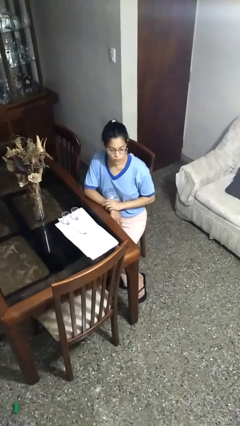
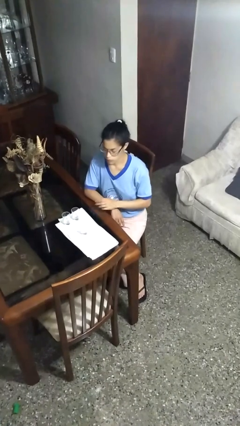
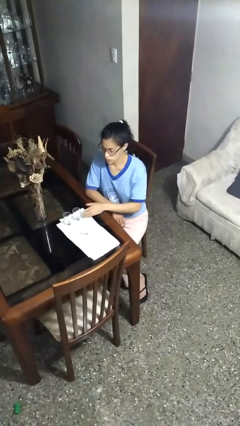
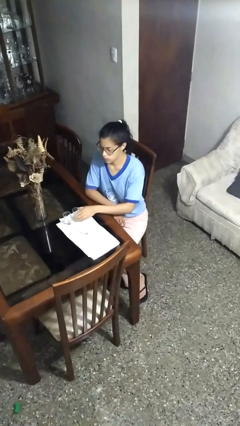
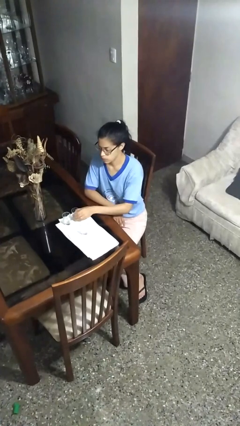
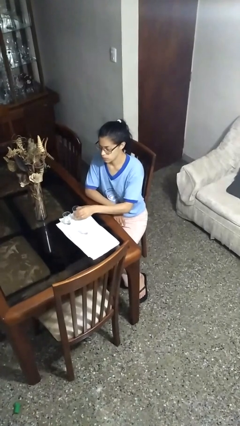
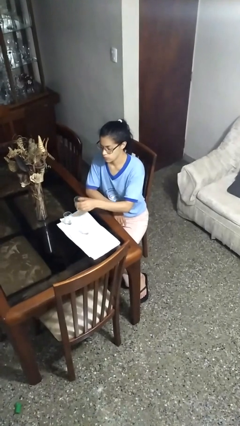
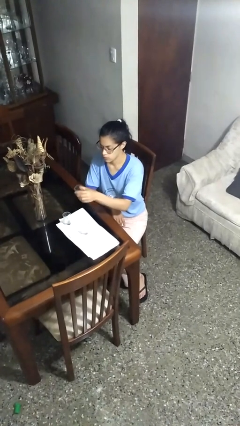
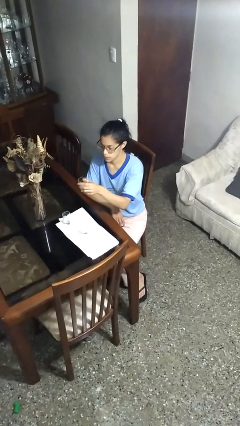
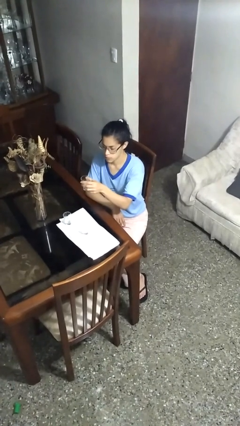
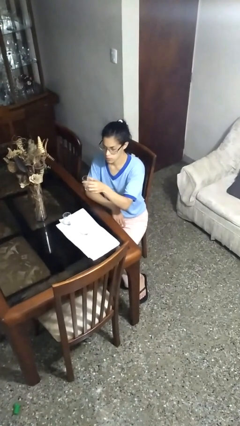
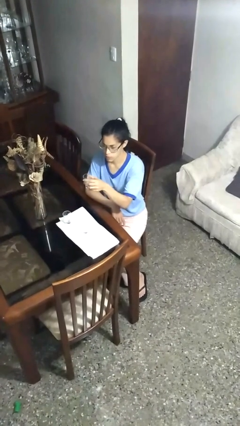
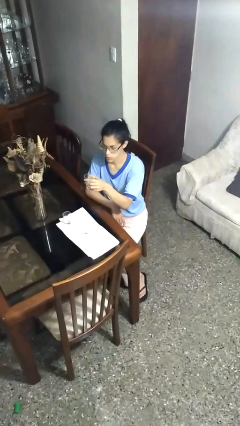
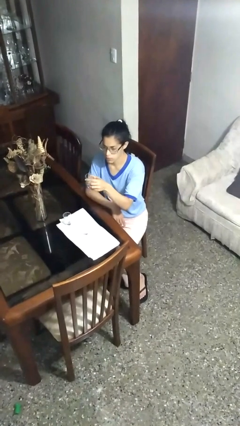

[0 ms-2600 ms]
person picks up object from table

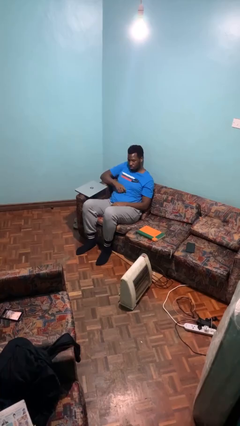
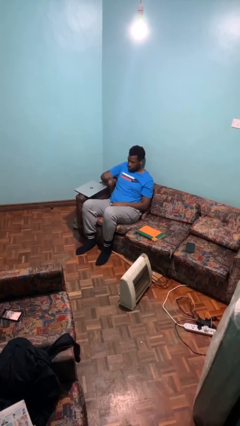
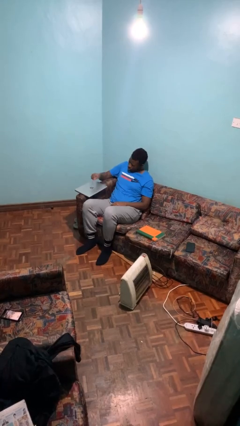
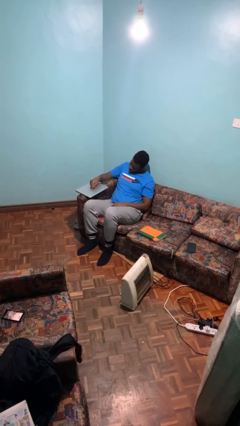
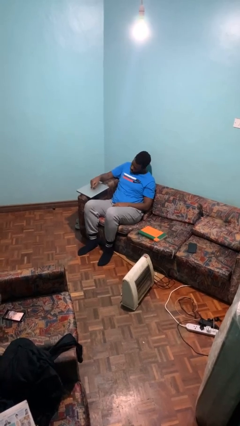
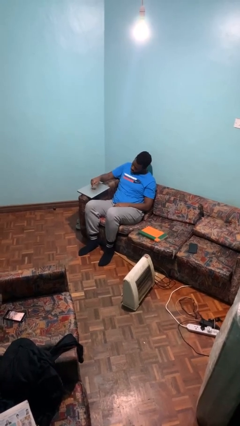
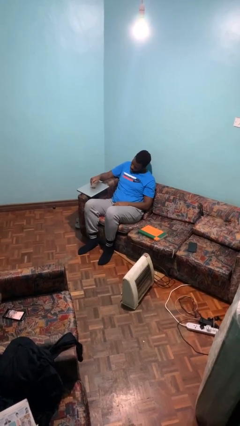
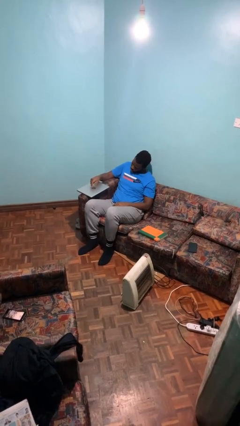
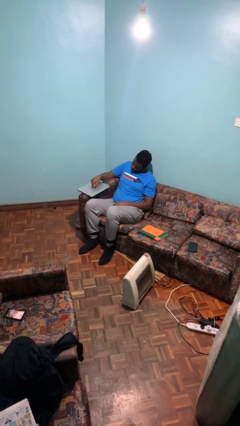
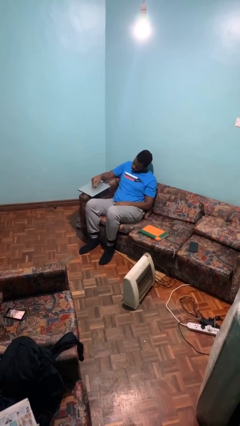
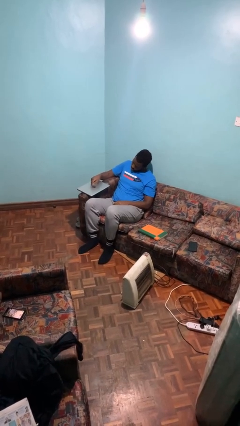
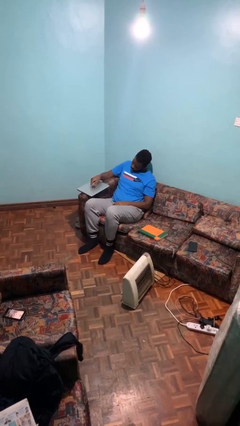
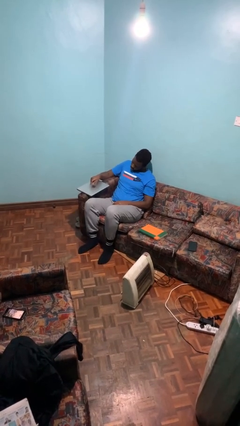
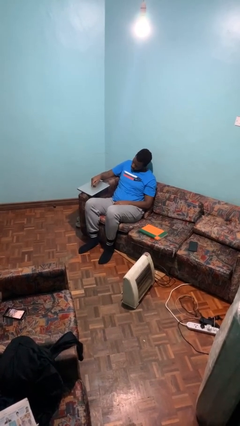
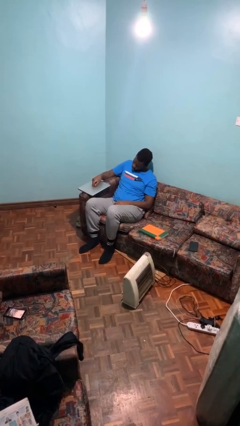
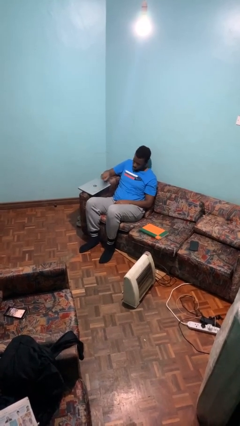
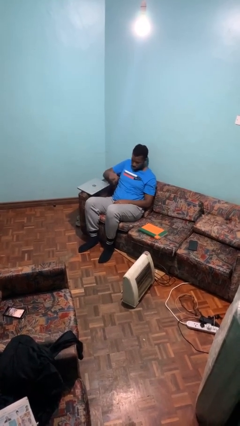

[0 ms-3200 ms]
person taps object with finger

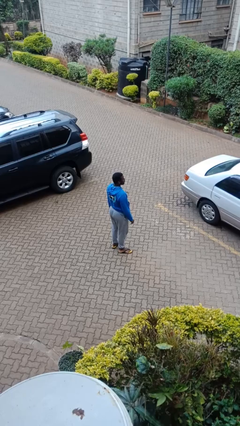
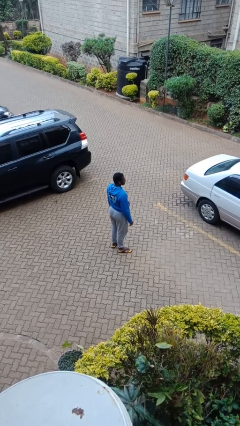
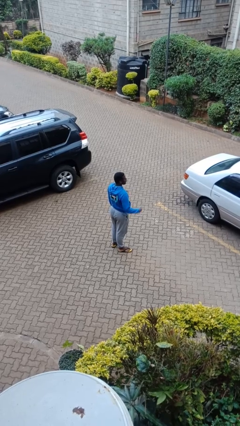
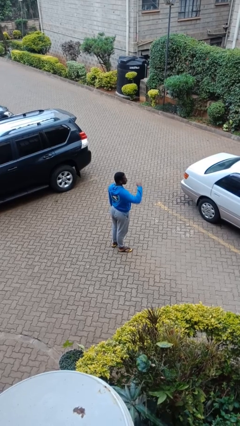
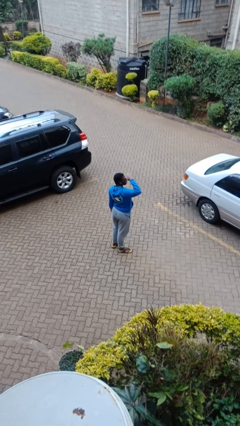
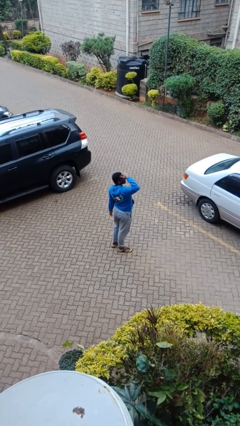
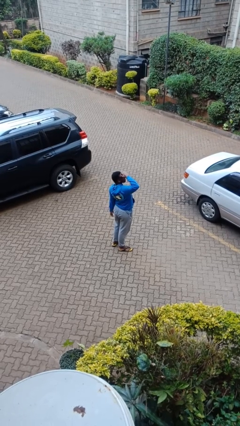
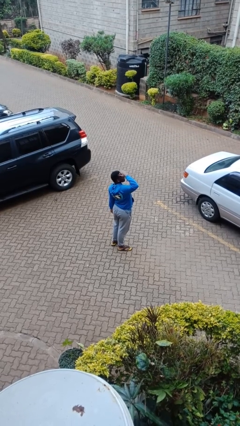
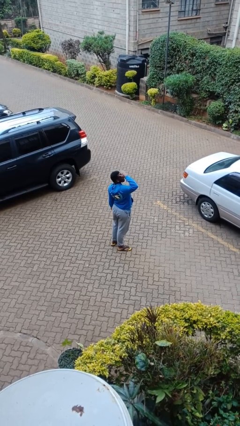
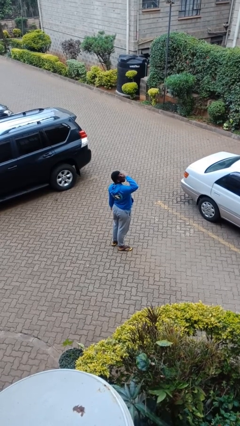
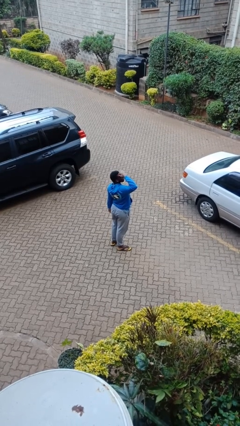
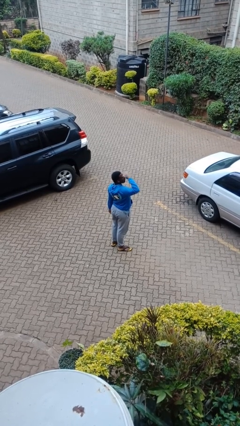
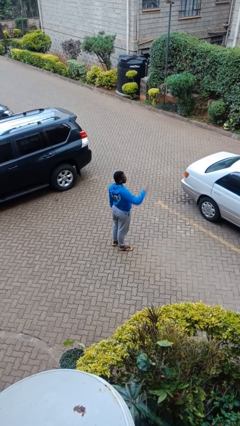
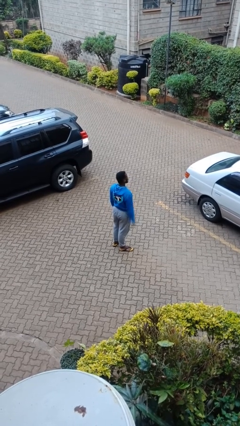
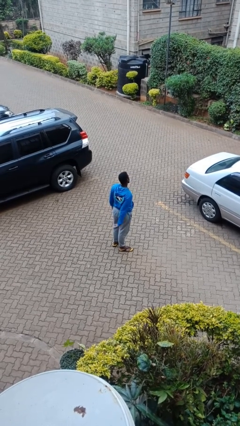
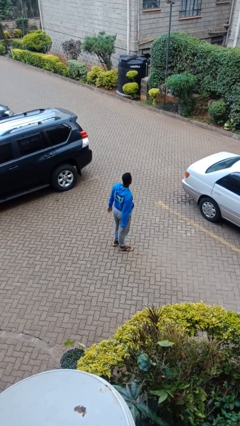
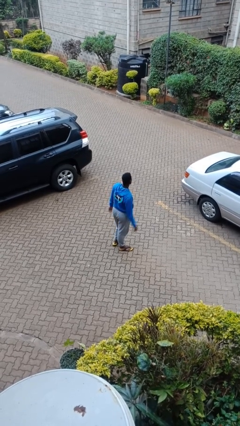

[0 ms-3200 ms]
person shades eyes

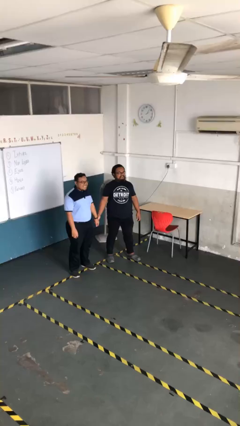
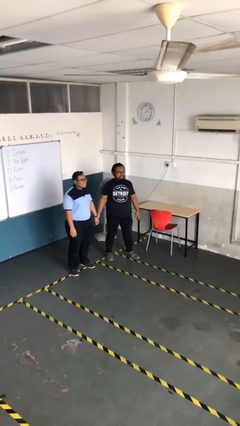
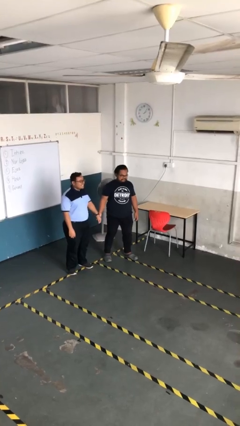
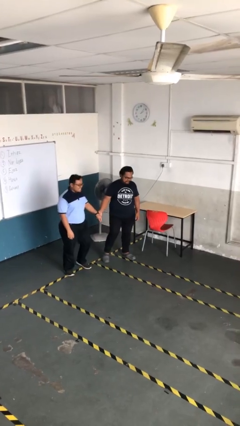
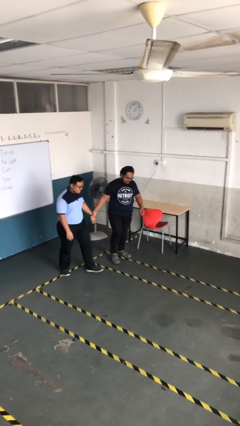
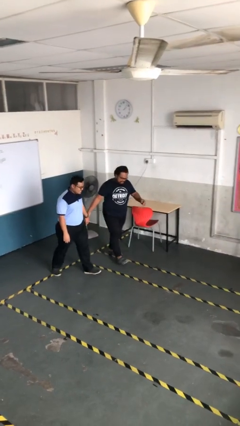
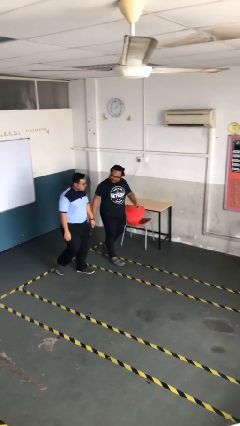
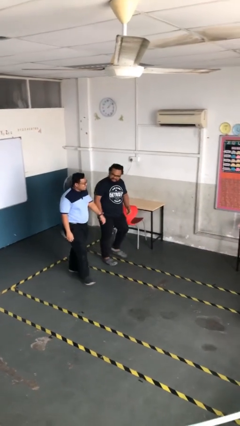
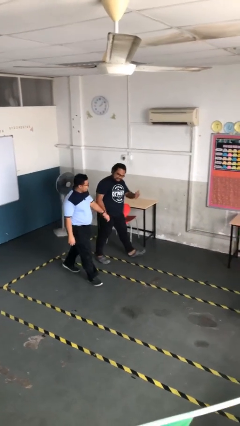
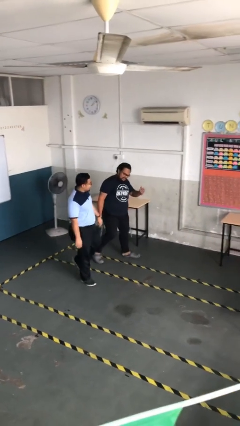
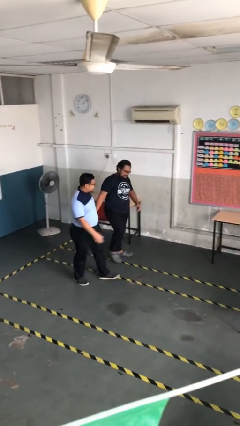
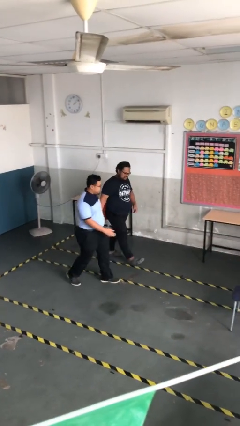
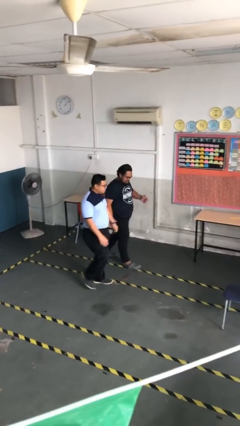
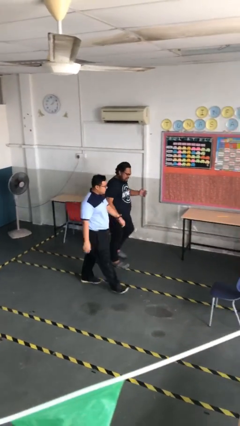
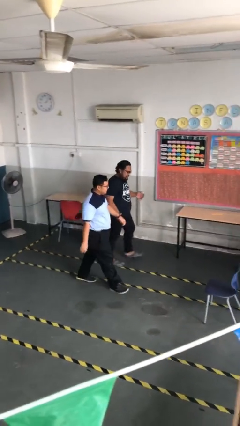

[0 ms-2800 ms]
person holds hand

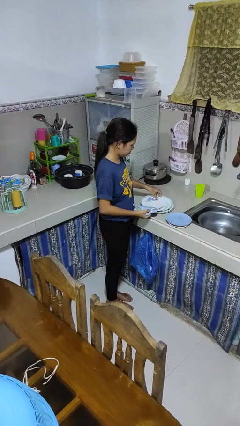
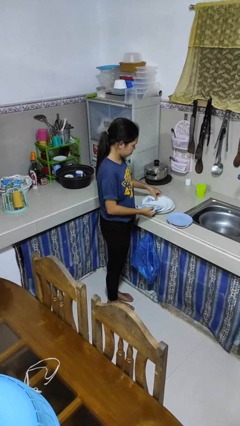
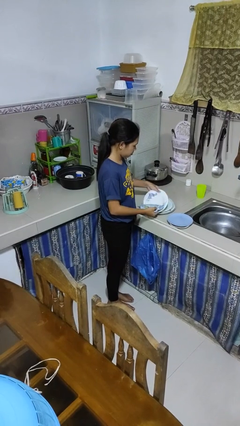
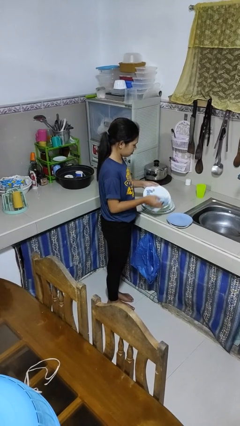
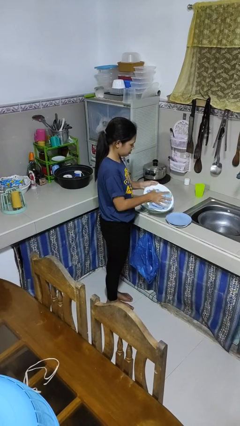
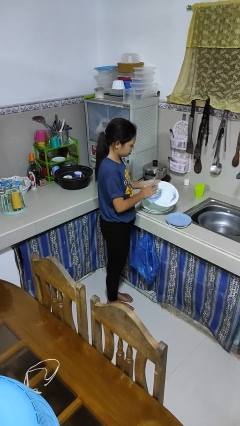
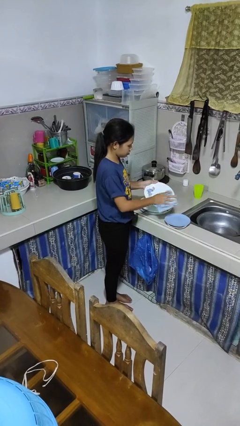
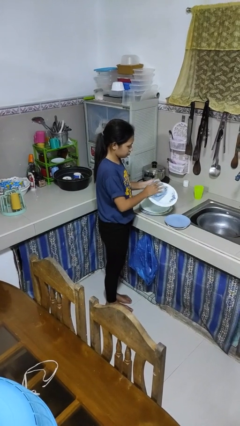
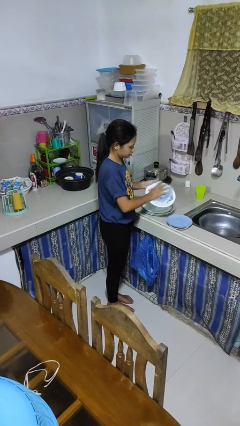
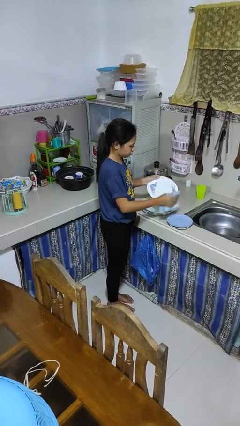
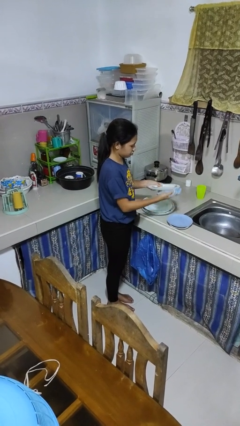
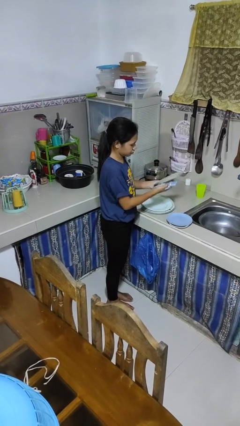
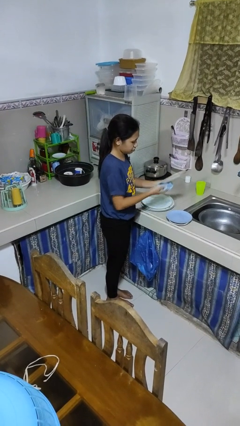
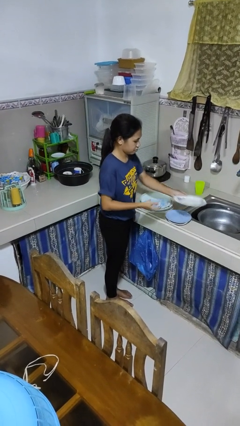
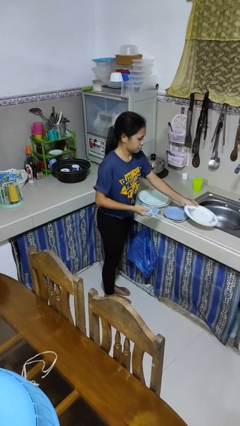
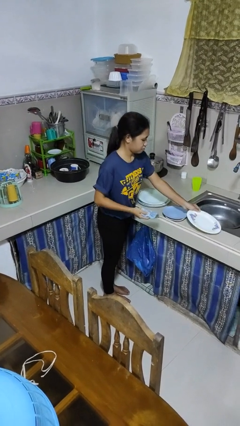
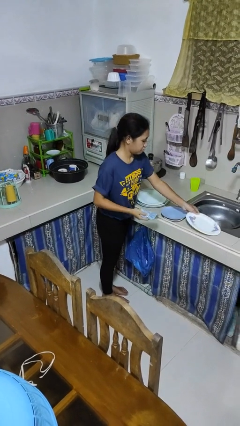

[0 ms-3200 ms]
person dries dish

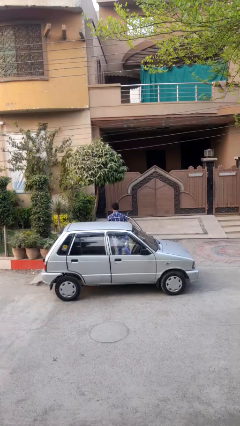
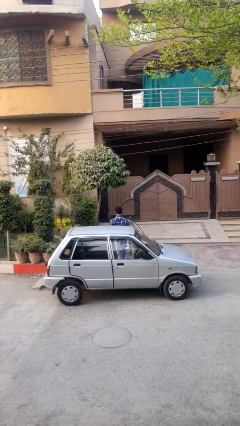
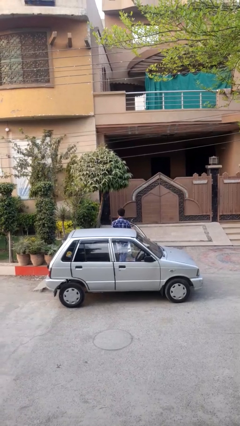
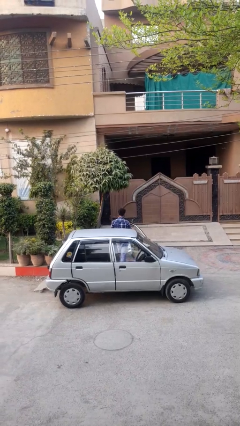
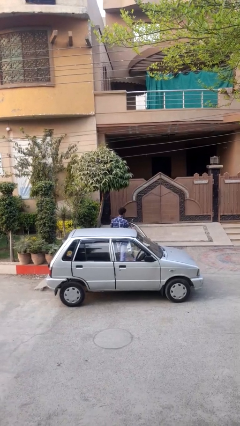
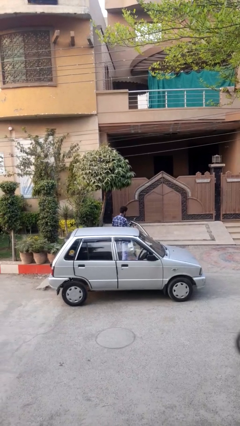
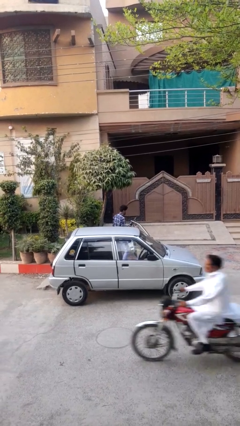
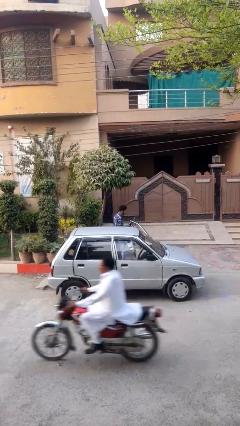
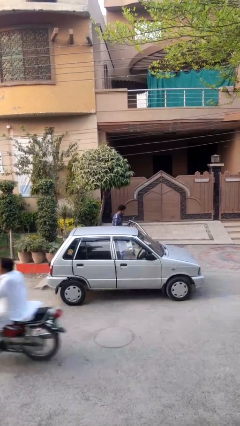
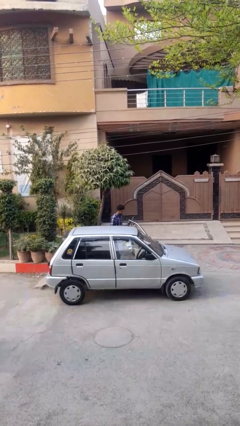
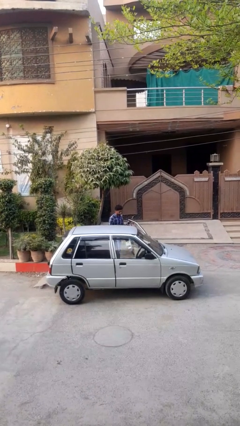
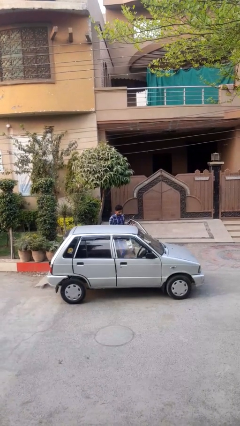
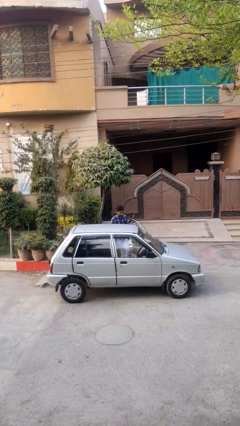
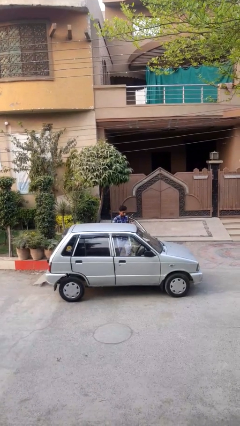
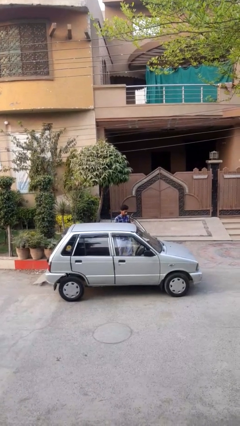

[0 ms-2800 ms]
person exits car
